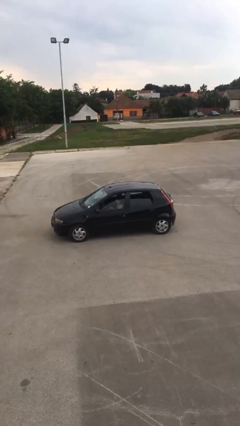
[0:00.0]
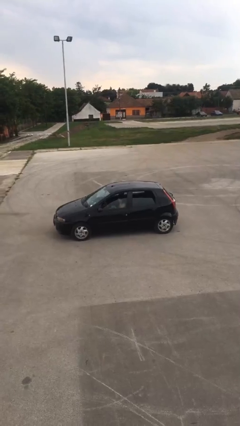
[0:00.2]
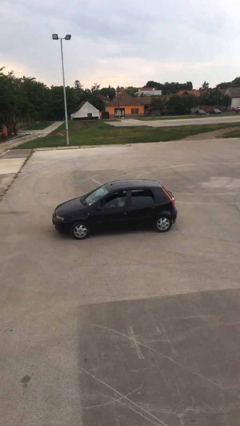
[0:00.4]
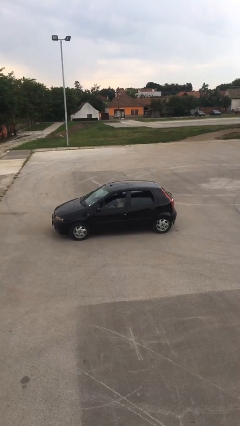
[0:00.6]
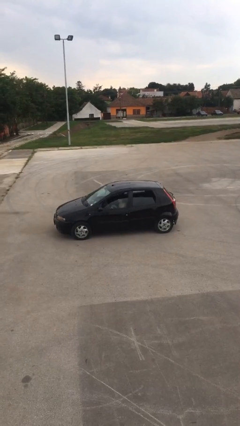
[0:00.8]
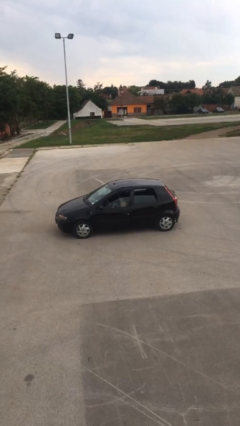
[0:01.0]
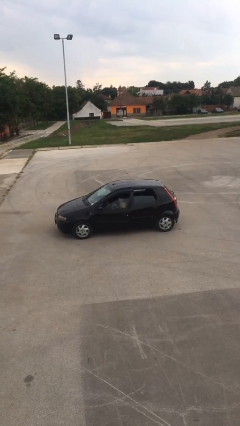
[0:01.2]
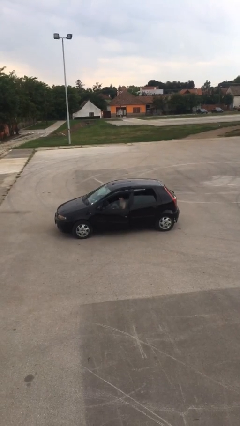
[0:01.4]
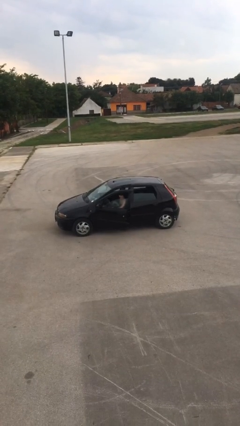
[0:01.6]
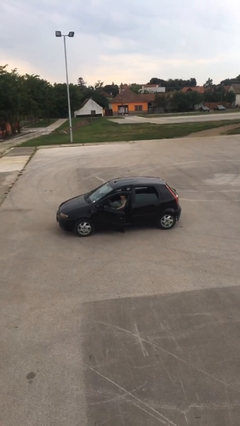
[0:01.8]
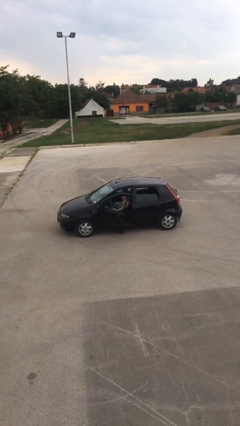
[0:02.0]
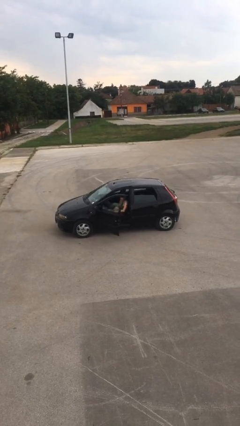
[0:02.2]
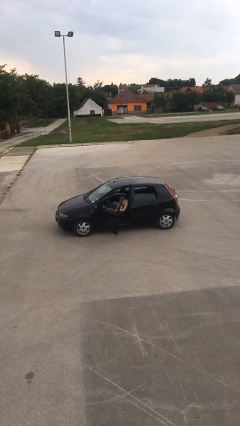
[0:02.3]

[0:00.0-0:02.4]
person opens car door

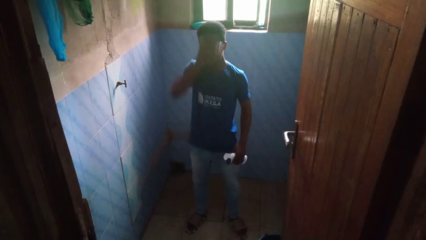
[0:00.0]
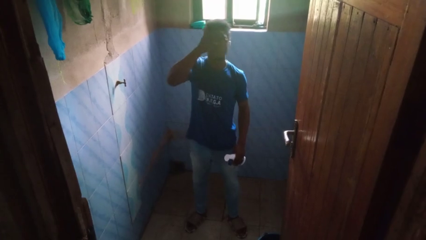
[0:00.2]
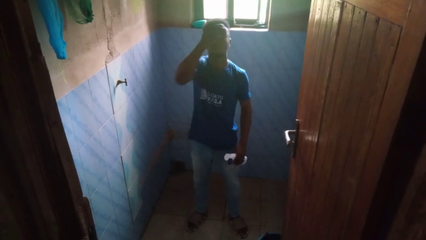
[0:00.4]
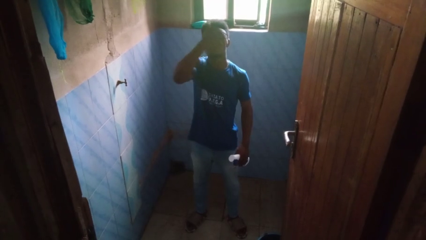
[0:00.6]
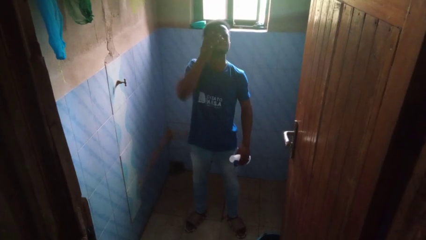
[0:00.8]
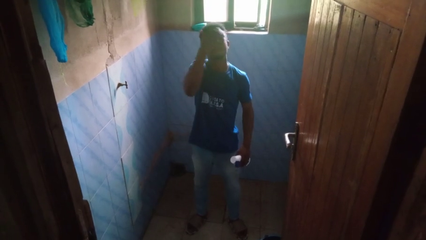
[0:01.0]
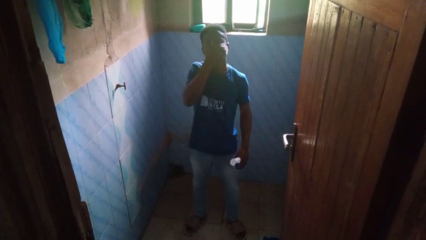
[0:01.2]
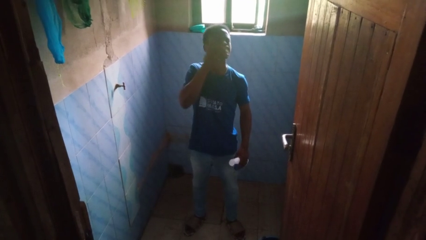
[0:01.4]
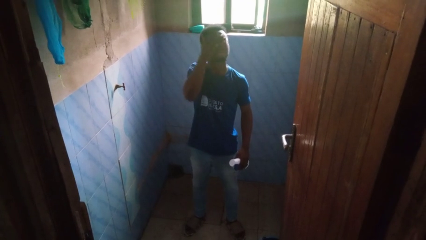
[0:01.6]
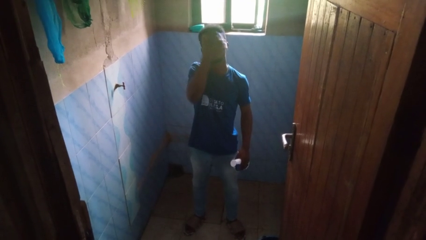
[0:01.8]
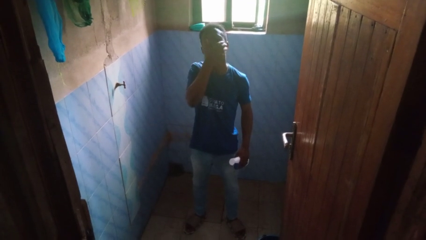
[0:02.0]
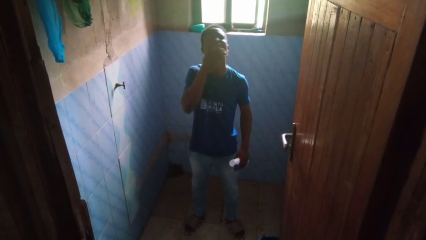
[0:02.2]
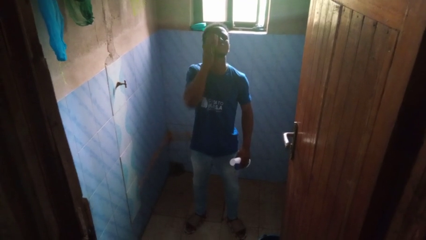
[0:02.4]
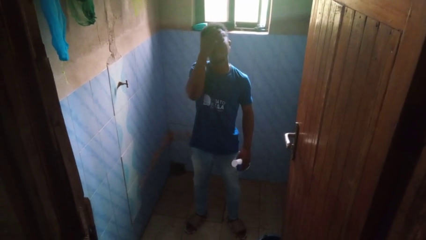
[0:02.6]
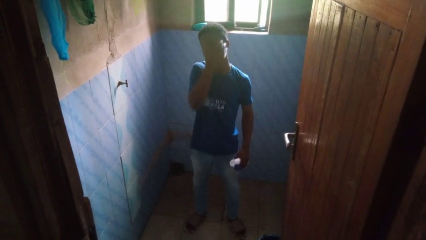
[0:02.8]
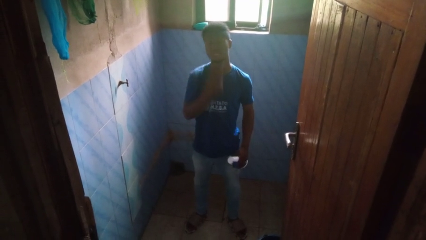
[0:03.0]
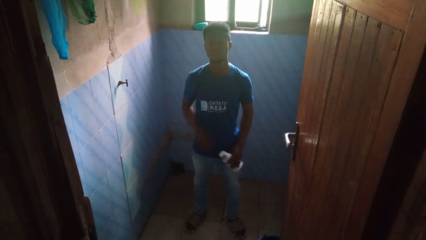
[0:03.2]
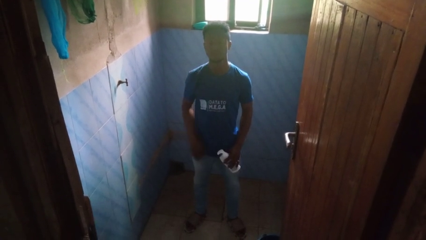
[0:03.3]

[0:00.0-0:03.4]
person applies facial moisturizer

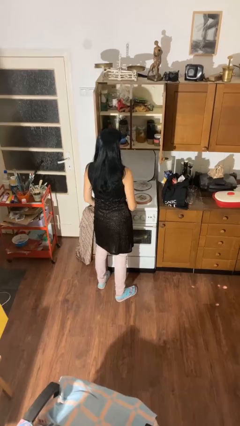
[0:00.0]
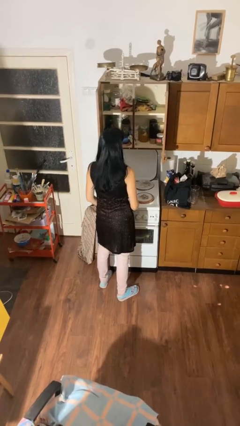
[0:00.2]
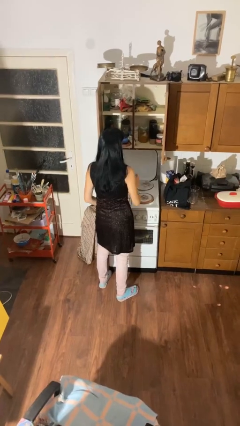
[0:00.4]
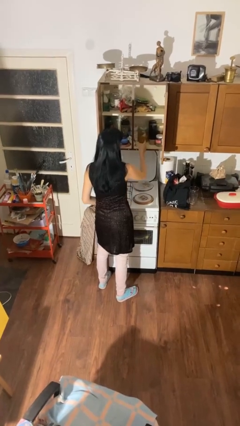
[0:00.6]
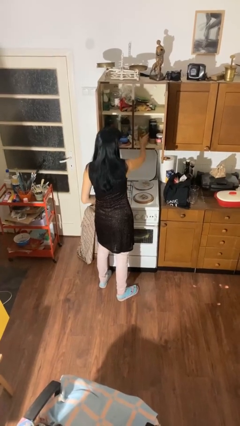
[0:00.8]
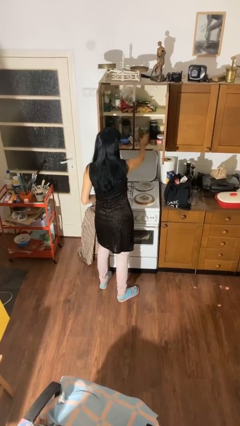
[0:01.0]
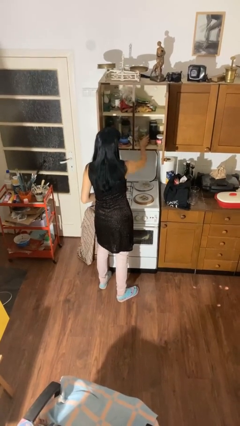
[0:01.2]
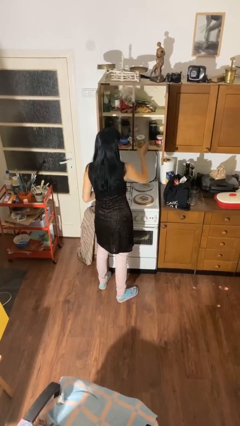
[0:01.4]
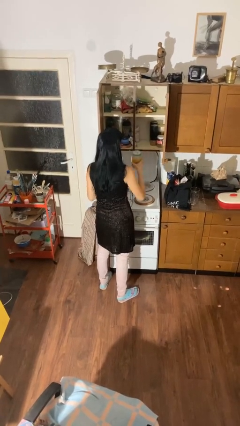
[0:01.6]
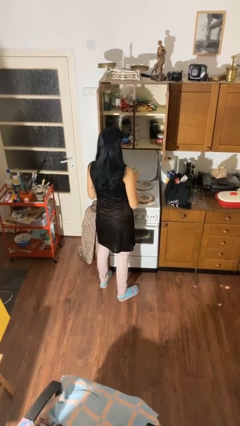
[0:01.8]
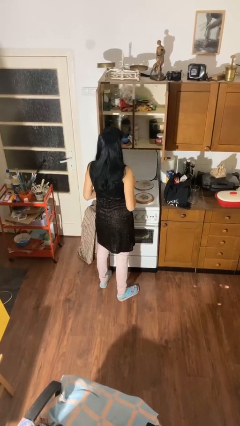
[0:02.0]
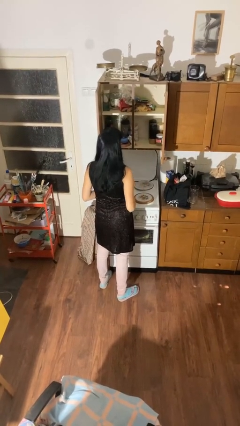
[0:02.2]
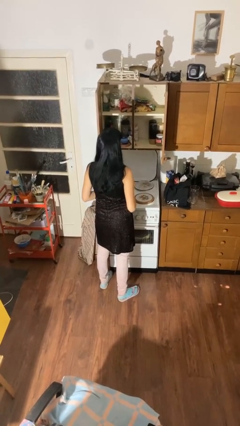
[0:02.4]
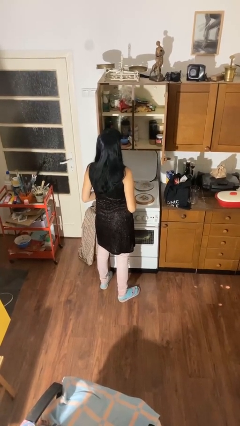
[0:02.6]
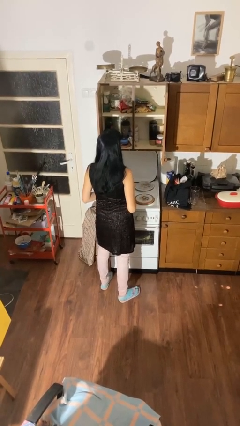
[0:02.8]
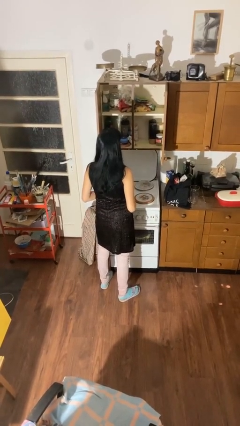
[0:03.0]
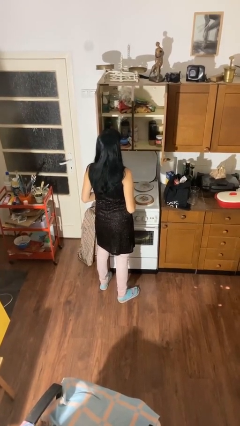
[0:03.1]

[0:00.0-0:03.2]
person picks up object from cabinet

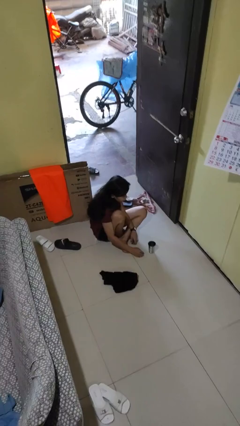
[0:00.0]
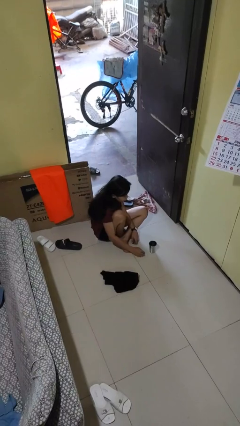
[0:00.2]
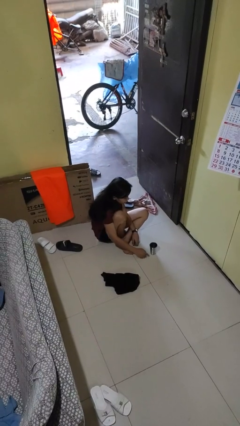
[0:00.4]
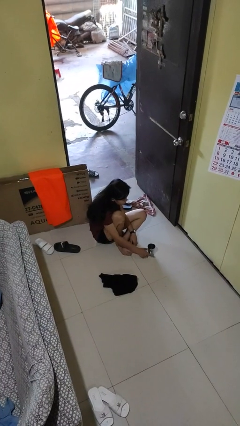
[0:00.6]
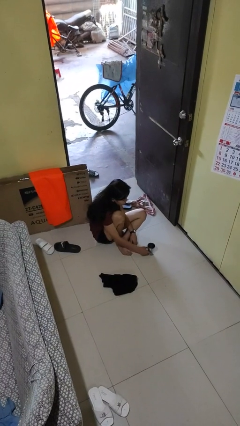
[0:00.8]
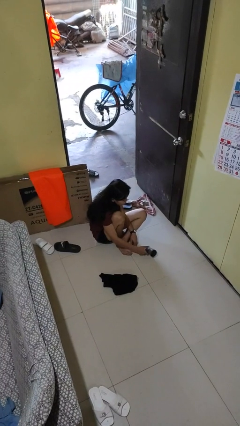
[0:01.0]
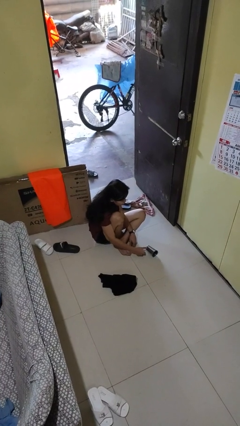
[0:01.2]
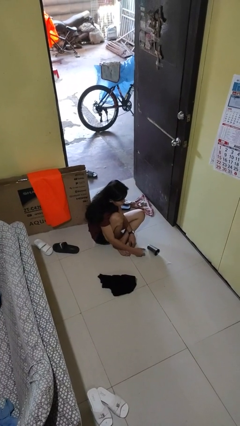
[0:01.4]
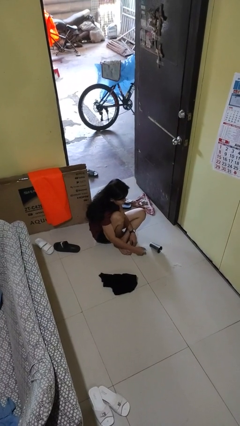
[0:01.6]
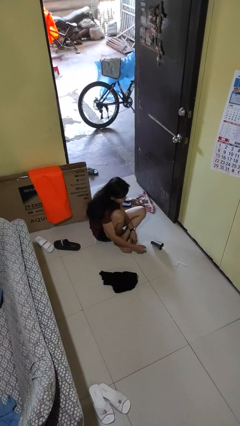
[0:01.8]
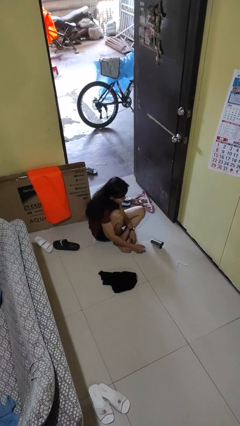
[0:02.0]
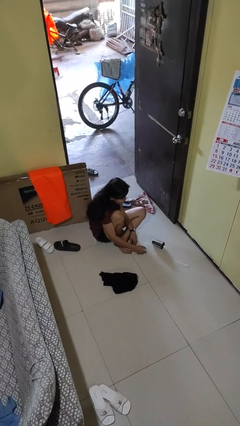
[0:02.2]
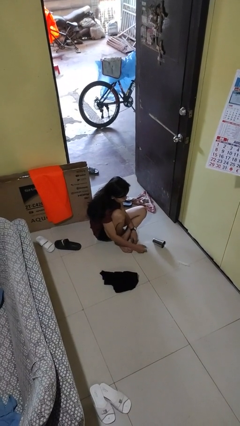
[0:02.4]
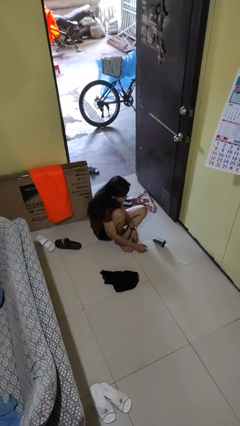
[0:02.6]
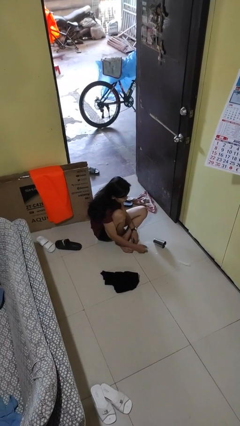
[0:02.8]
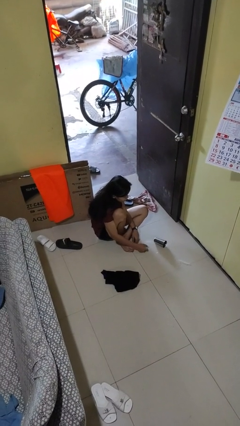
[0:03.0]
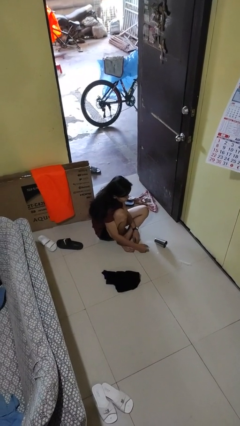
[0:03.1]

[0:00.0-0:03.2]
person spills on floor

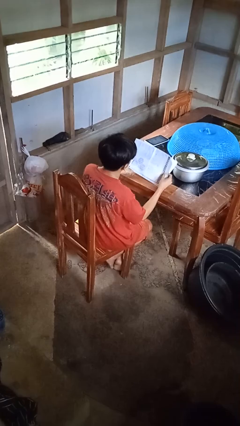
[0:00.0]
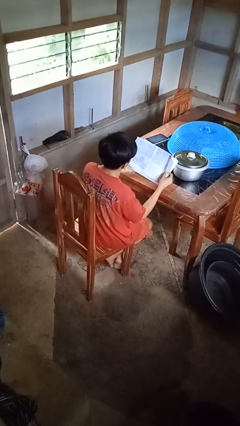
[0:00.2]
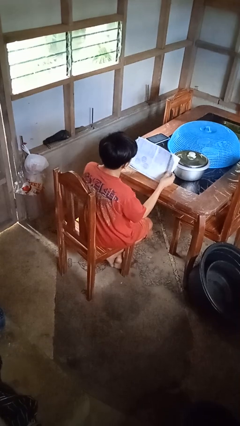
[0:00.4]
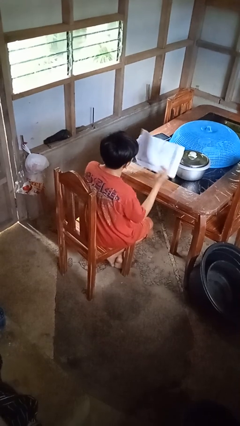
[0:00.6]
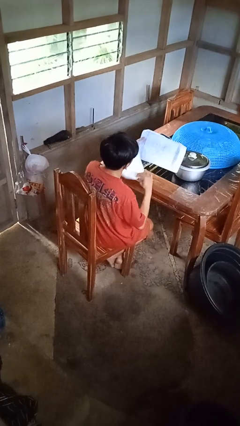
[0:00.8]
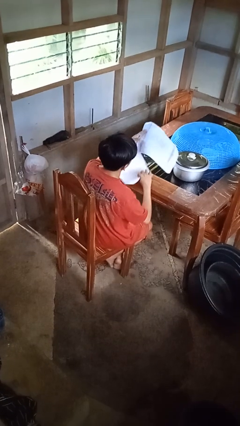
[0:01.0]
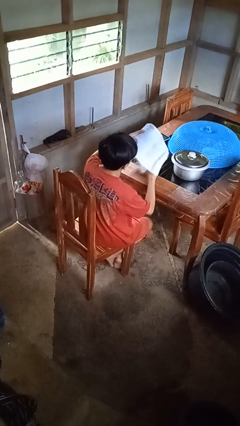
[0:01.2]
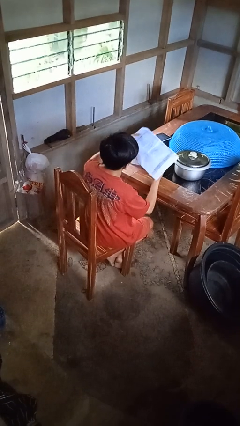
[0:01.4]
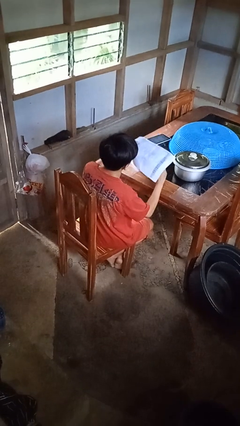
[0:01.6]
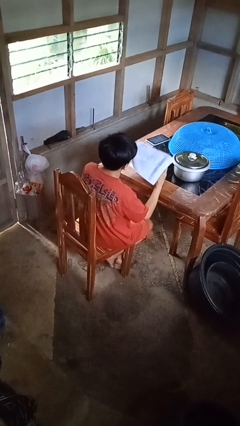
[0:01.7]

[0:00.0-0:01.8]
person reads newspaper

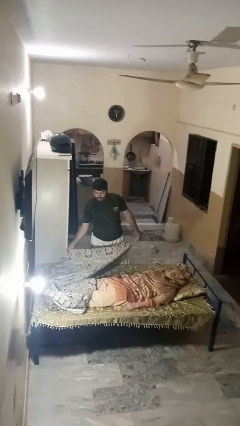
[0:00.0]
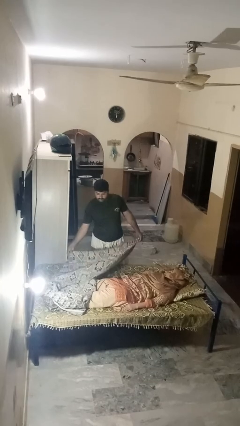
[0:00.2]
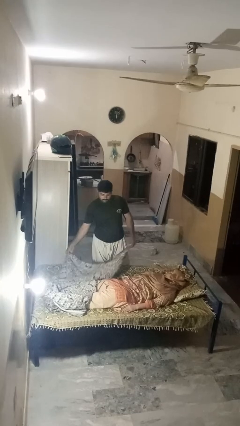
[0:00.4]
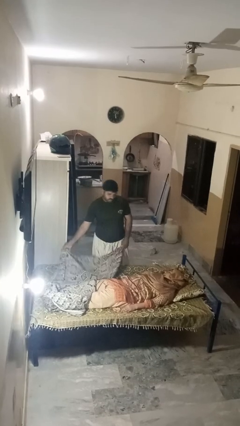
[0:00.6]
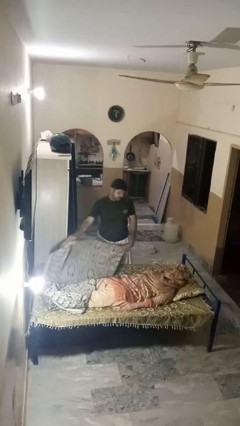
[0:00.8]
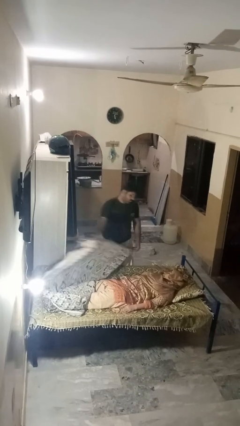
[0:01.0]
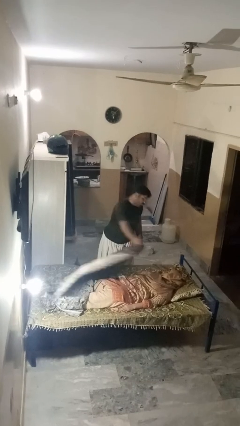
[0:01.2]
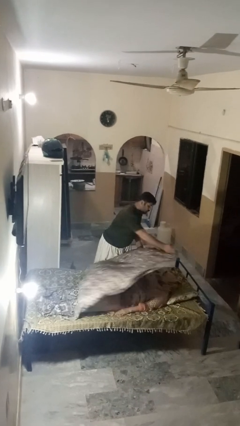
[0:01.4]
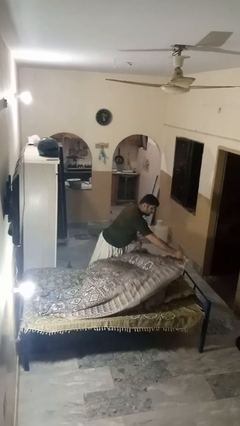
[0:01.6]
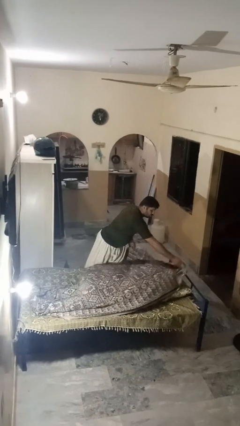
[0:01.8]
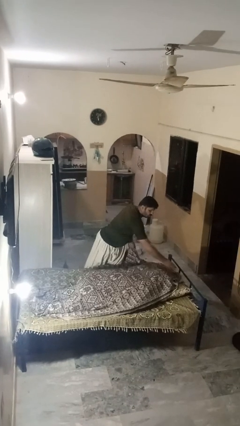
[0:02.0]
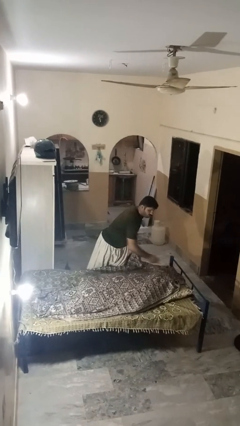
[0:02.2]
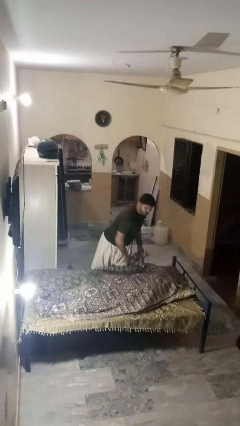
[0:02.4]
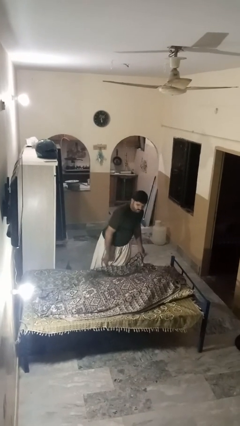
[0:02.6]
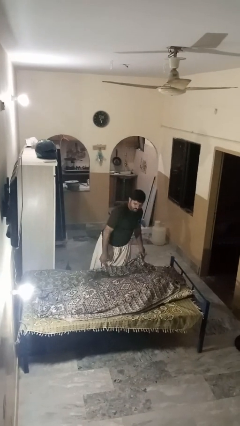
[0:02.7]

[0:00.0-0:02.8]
person covers friend with blanket

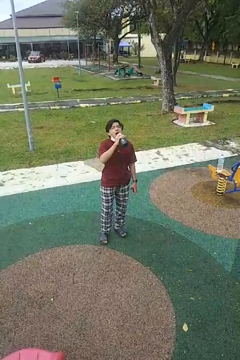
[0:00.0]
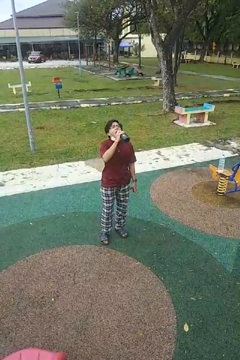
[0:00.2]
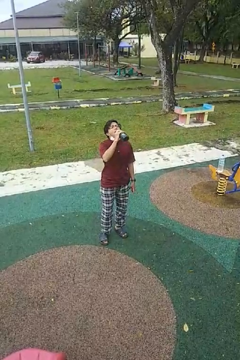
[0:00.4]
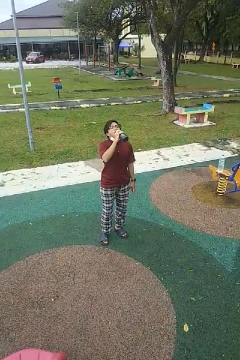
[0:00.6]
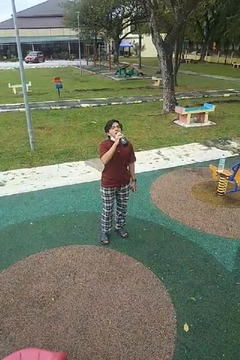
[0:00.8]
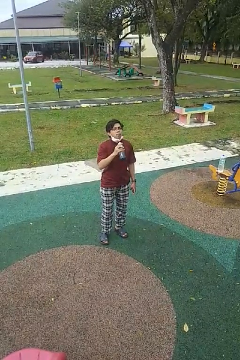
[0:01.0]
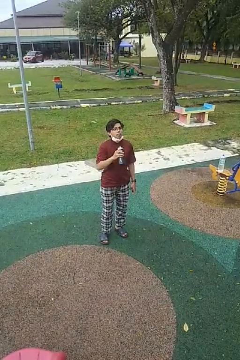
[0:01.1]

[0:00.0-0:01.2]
person drinks from bottle
